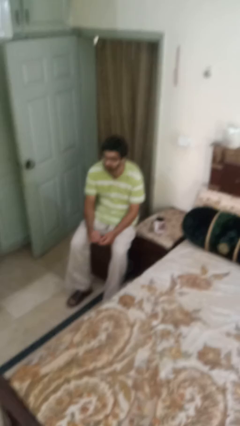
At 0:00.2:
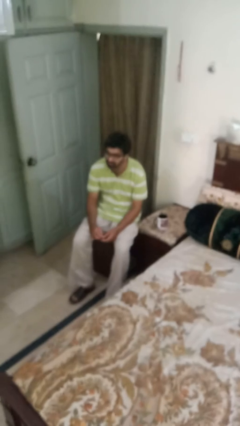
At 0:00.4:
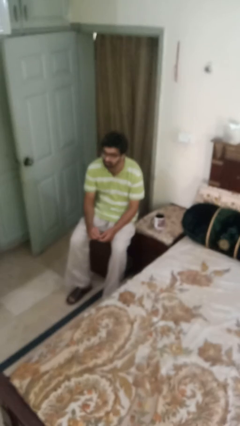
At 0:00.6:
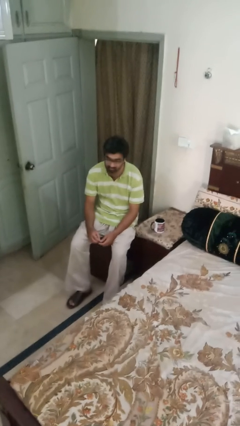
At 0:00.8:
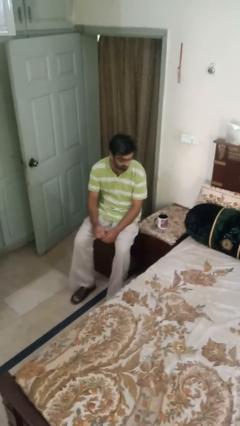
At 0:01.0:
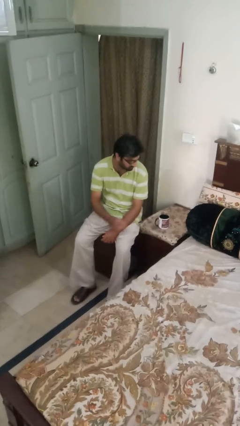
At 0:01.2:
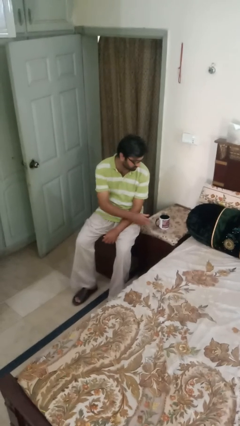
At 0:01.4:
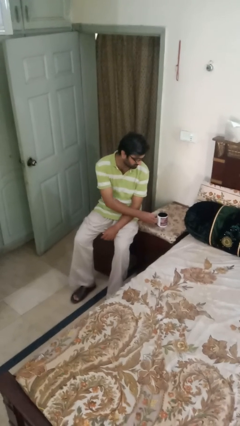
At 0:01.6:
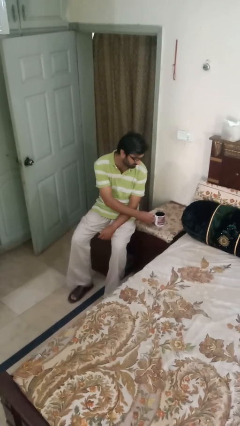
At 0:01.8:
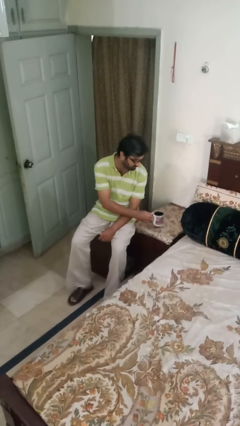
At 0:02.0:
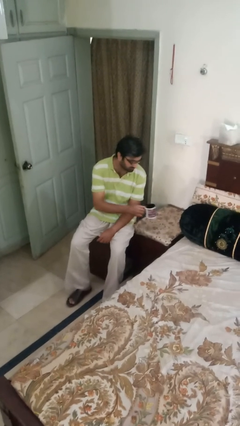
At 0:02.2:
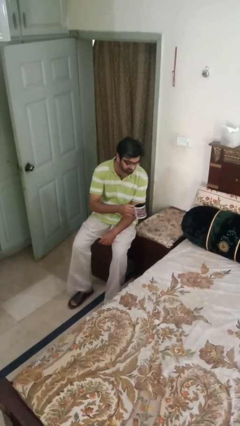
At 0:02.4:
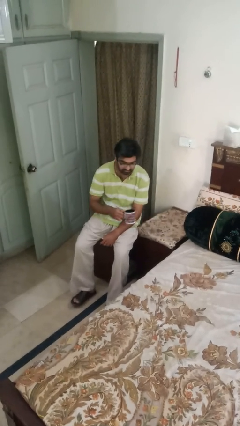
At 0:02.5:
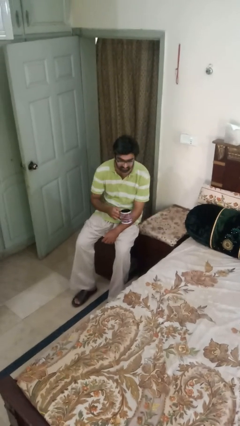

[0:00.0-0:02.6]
person picks up object from table

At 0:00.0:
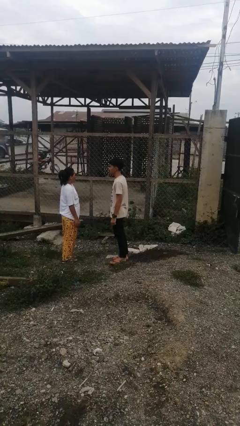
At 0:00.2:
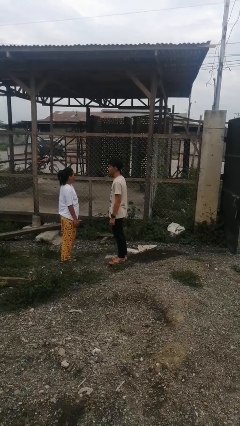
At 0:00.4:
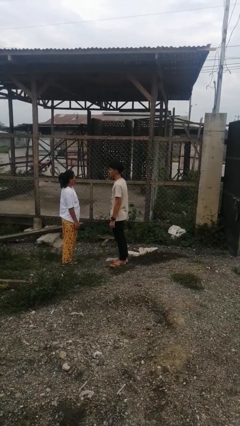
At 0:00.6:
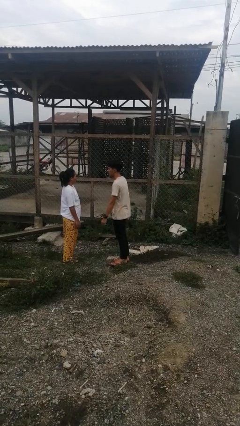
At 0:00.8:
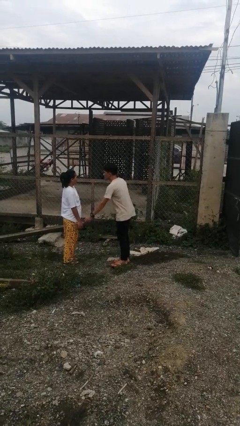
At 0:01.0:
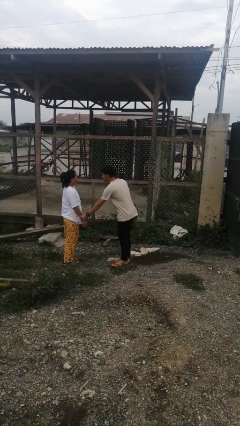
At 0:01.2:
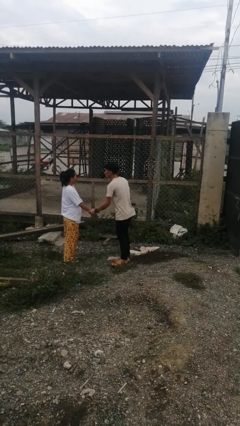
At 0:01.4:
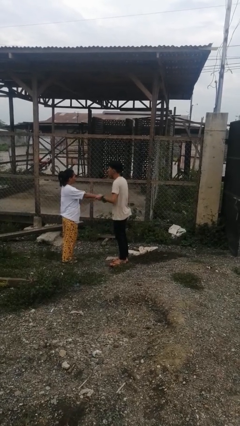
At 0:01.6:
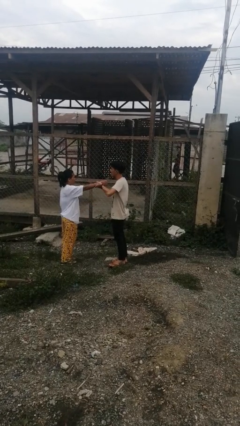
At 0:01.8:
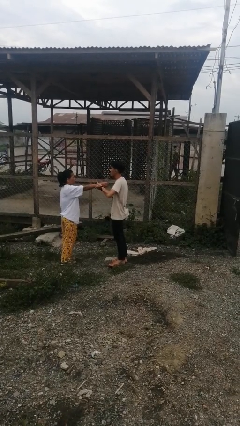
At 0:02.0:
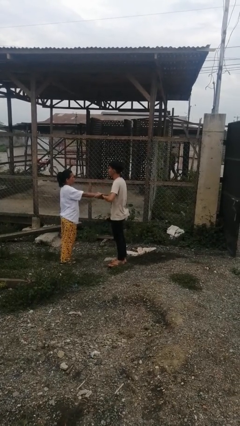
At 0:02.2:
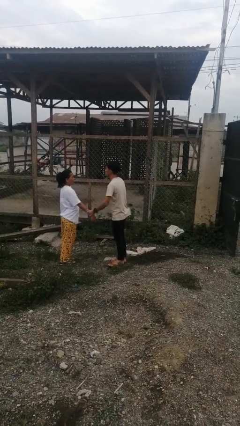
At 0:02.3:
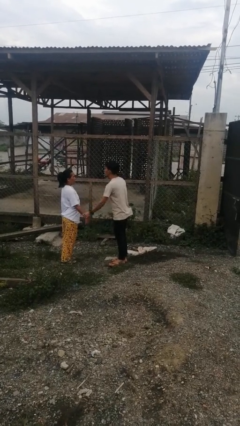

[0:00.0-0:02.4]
person grabs person by forearm

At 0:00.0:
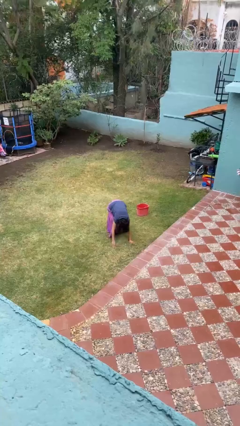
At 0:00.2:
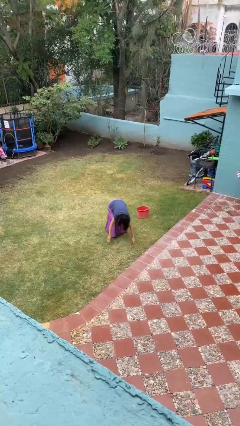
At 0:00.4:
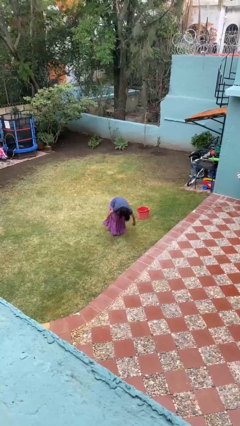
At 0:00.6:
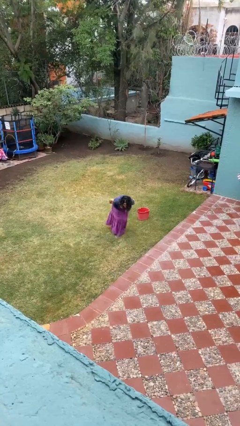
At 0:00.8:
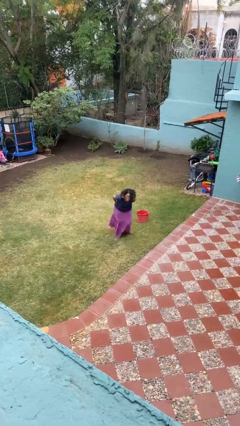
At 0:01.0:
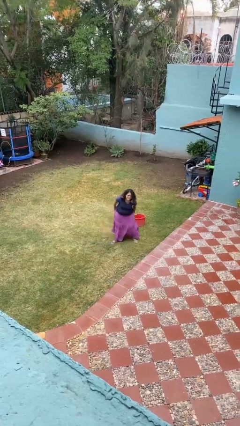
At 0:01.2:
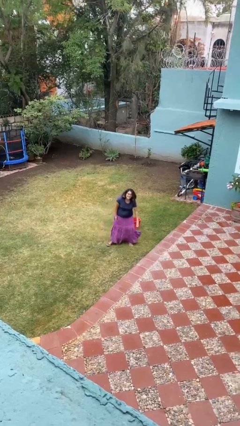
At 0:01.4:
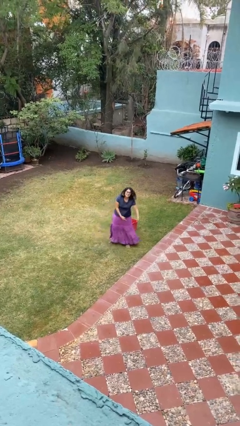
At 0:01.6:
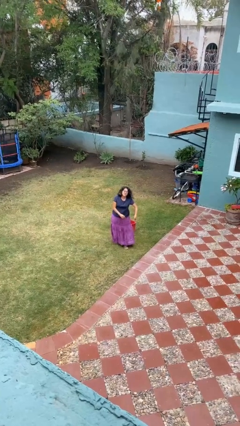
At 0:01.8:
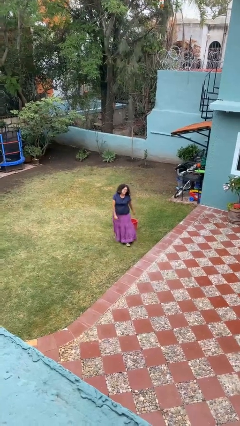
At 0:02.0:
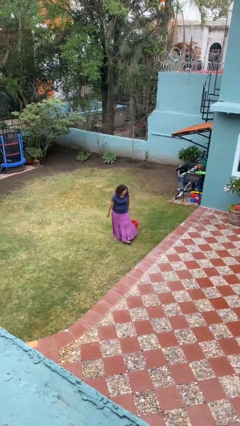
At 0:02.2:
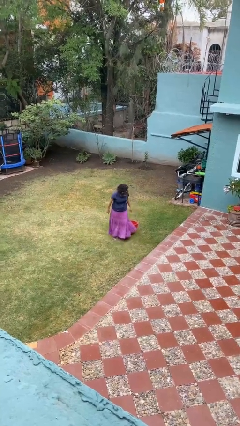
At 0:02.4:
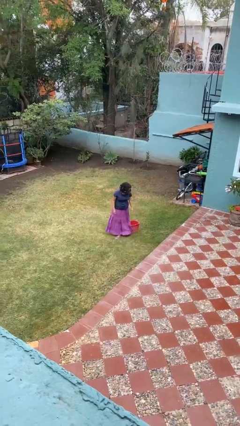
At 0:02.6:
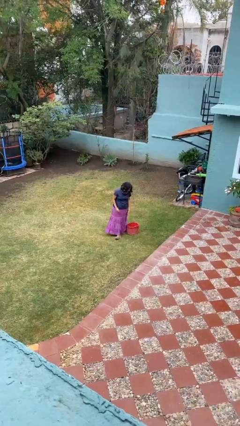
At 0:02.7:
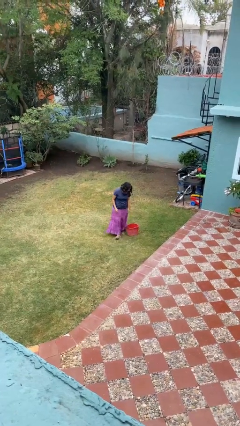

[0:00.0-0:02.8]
person stands up from floor

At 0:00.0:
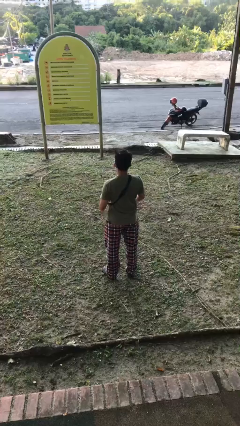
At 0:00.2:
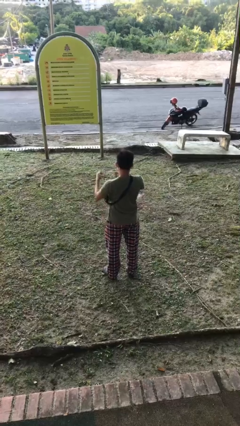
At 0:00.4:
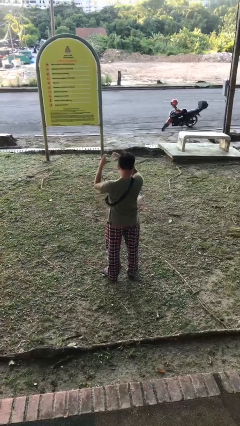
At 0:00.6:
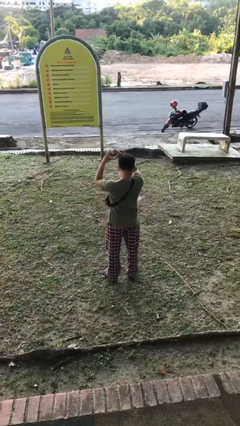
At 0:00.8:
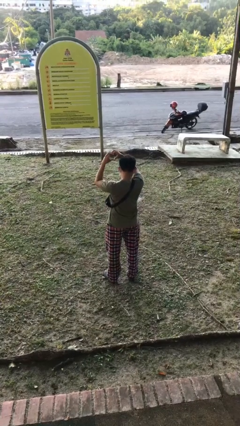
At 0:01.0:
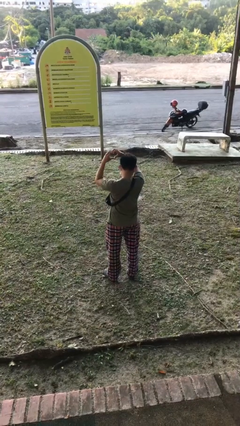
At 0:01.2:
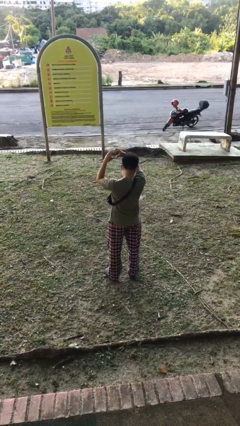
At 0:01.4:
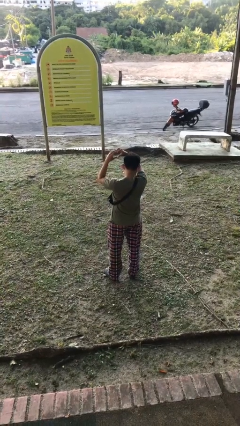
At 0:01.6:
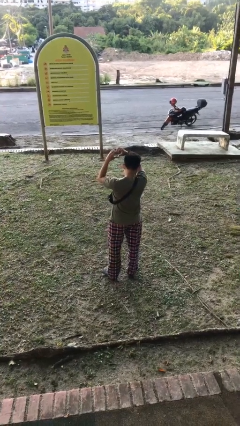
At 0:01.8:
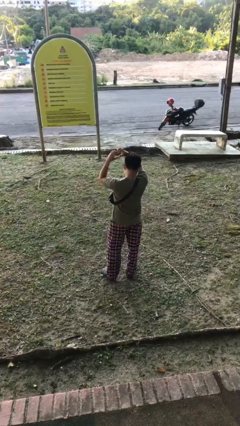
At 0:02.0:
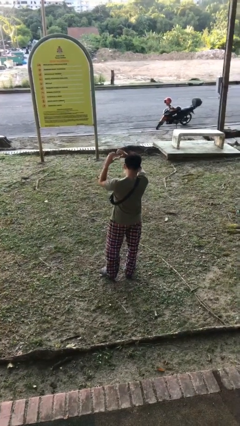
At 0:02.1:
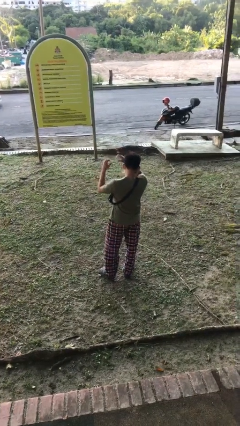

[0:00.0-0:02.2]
person gestures heart

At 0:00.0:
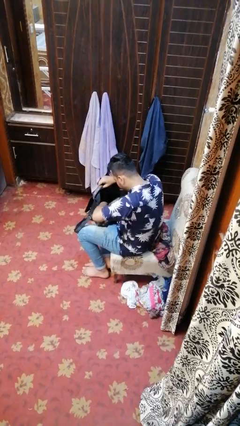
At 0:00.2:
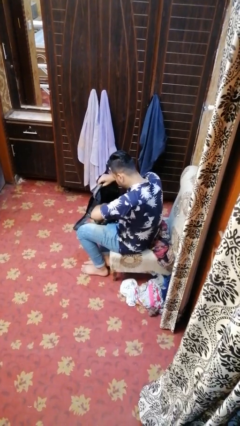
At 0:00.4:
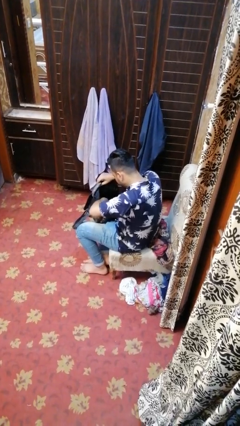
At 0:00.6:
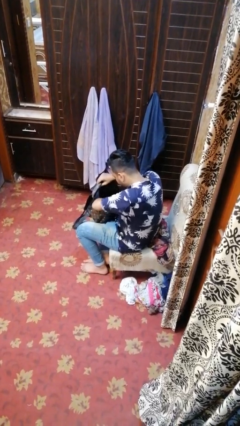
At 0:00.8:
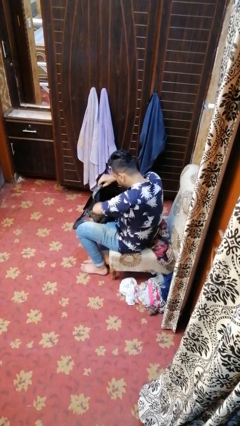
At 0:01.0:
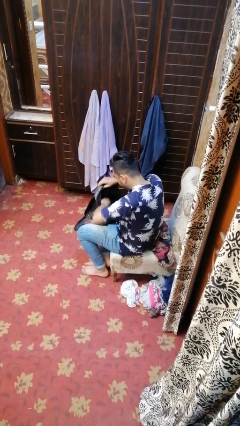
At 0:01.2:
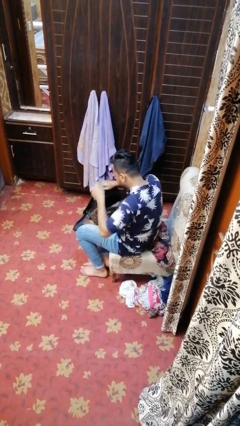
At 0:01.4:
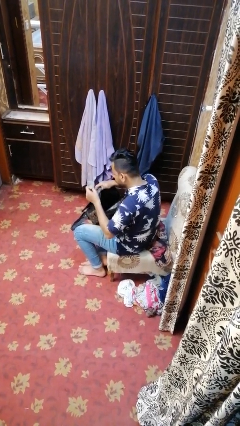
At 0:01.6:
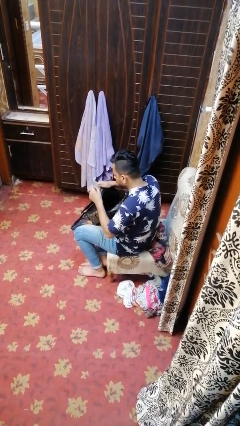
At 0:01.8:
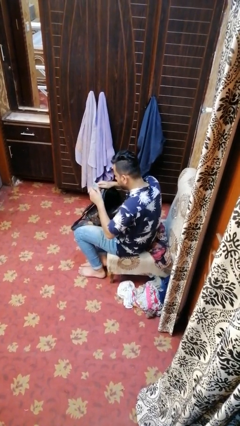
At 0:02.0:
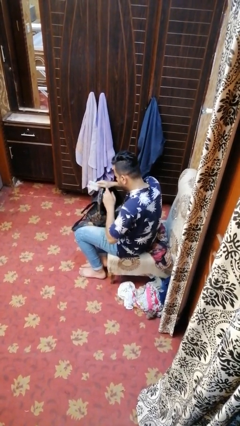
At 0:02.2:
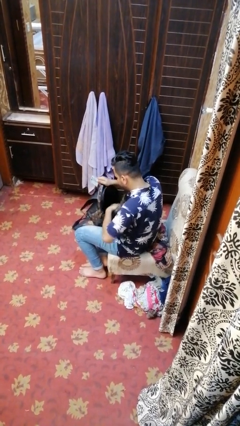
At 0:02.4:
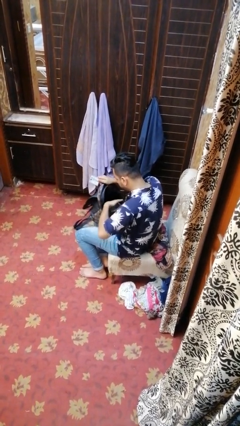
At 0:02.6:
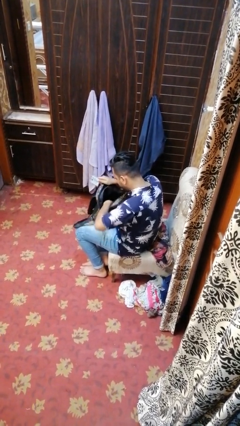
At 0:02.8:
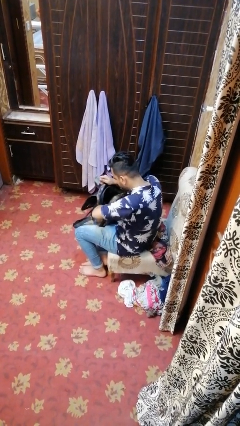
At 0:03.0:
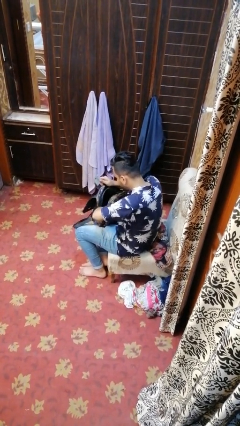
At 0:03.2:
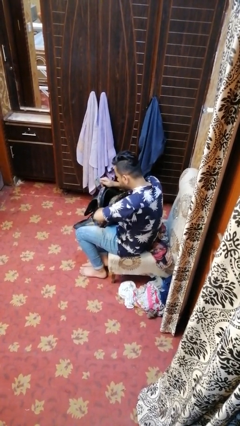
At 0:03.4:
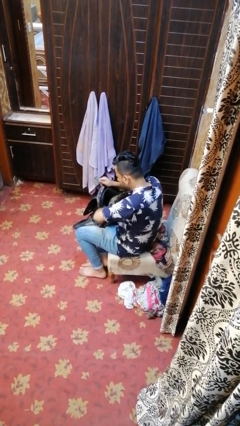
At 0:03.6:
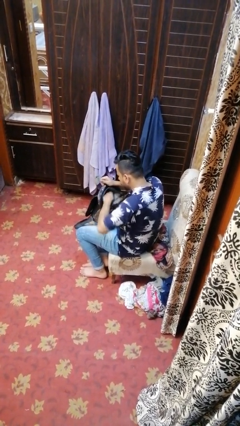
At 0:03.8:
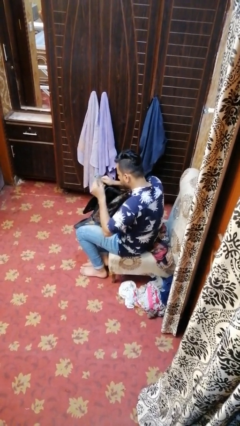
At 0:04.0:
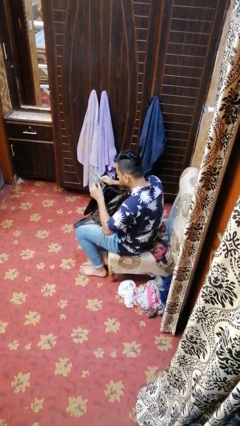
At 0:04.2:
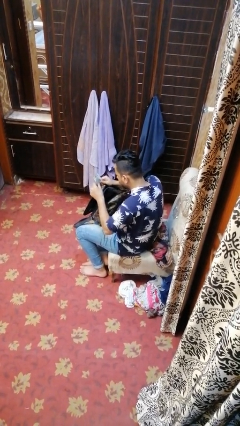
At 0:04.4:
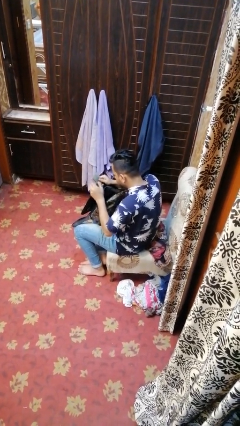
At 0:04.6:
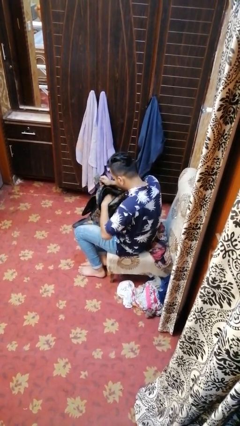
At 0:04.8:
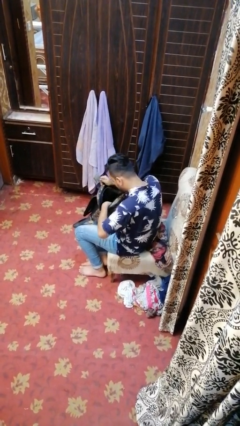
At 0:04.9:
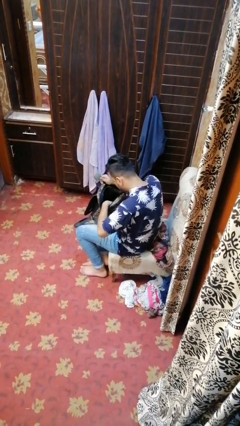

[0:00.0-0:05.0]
person takes object from backpack

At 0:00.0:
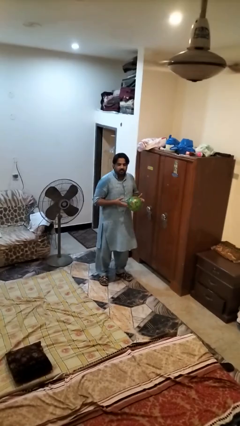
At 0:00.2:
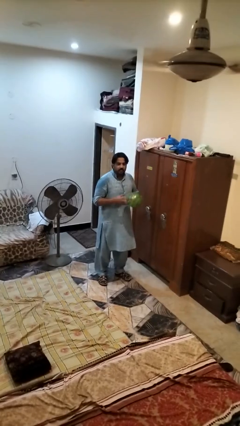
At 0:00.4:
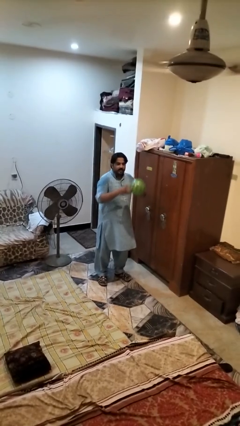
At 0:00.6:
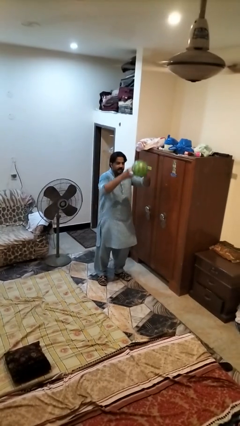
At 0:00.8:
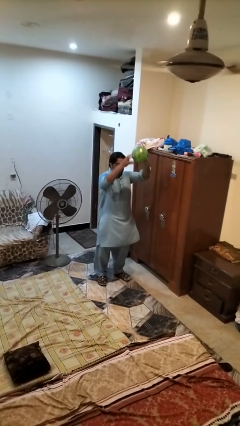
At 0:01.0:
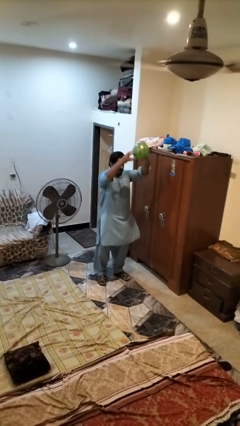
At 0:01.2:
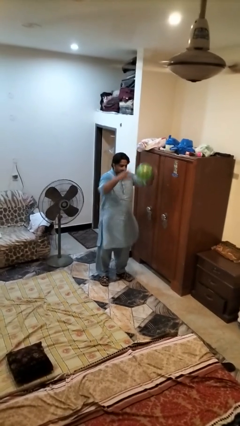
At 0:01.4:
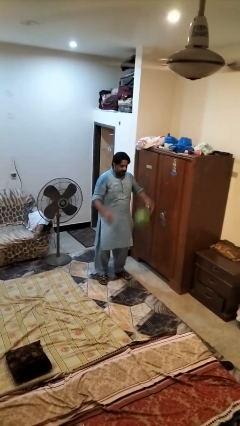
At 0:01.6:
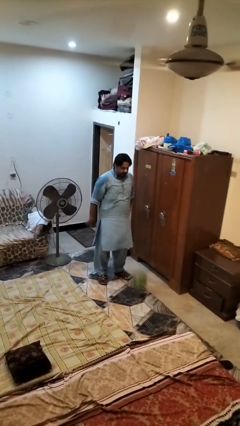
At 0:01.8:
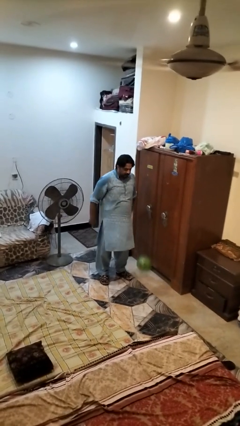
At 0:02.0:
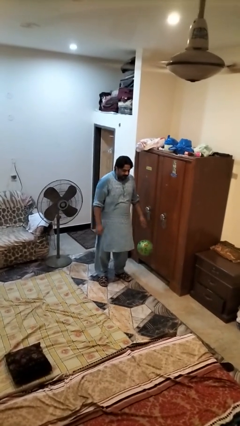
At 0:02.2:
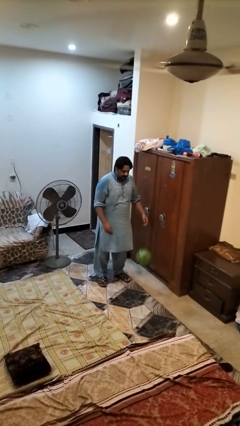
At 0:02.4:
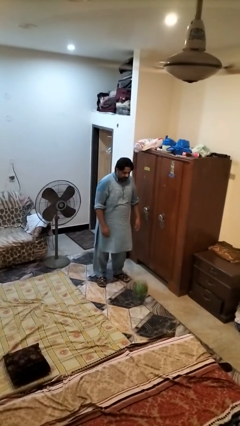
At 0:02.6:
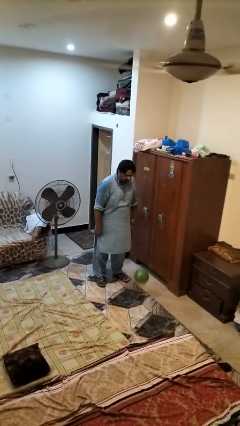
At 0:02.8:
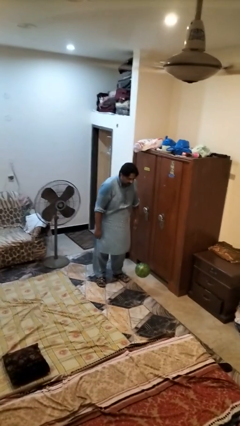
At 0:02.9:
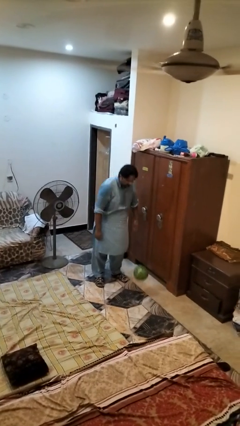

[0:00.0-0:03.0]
person drops object
